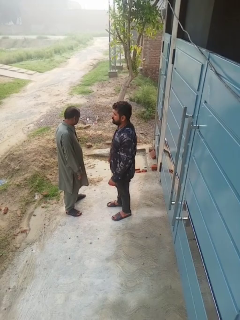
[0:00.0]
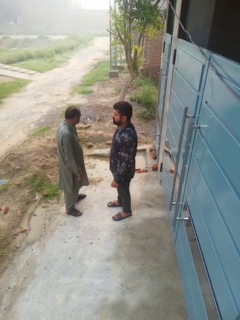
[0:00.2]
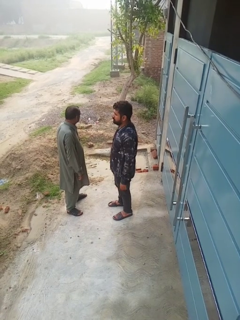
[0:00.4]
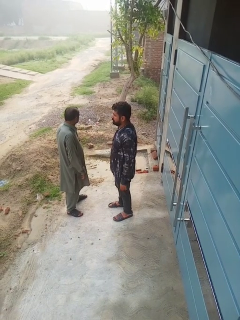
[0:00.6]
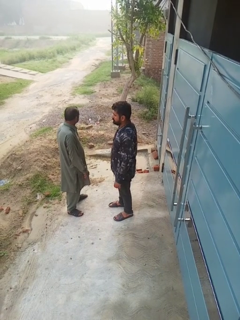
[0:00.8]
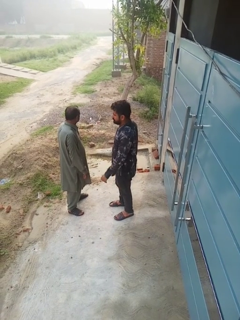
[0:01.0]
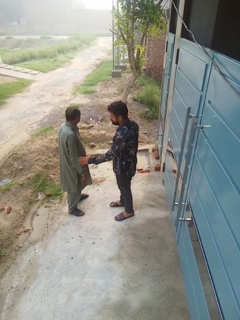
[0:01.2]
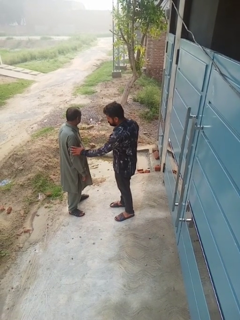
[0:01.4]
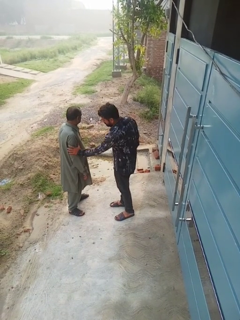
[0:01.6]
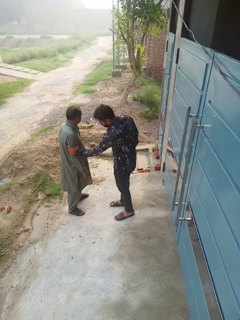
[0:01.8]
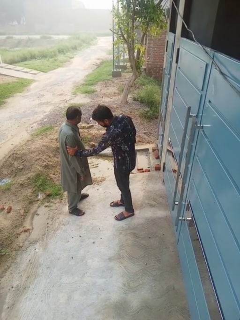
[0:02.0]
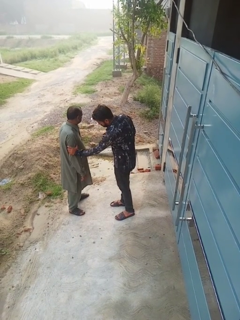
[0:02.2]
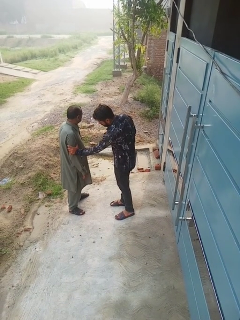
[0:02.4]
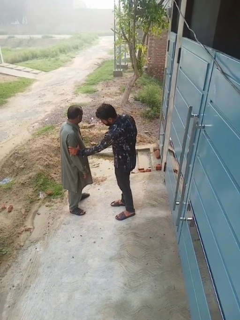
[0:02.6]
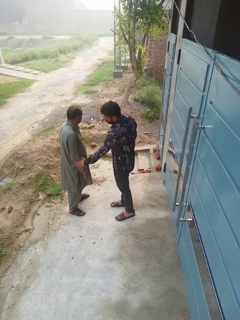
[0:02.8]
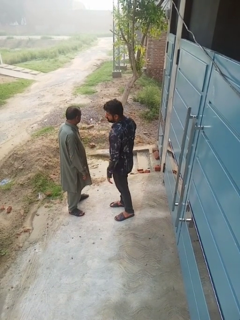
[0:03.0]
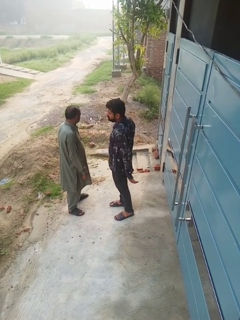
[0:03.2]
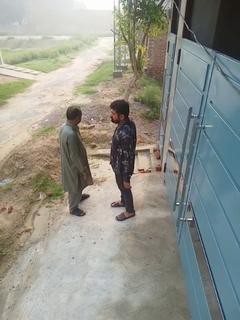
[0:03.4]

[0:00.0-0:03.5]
person grabs person by bicep

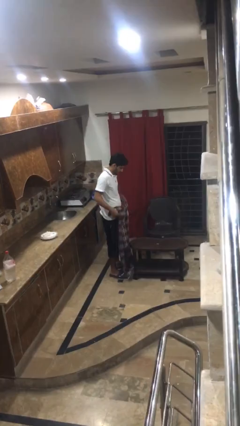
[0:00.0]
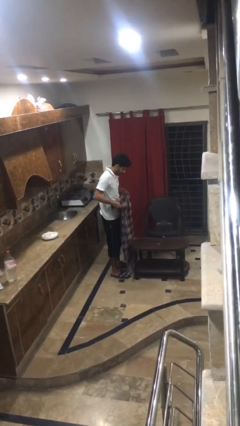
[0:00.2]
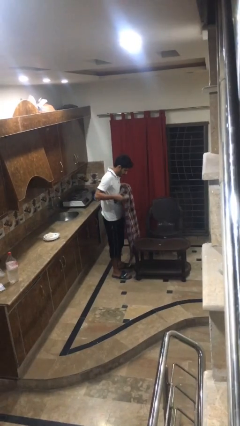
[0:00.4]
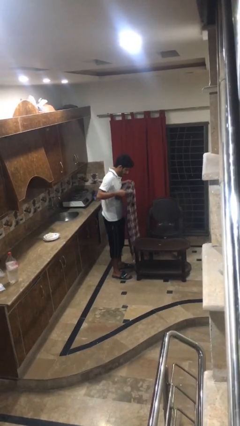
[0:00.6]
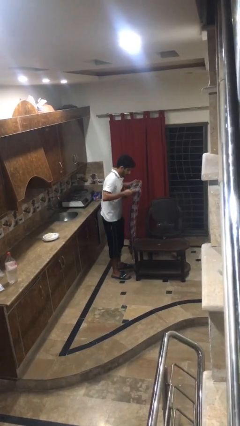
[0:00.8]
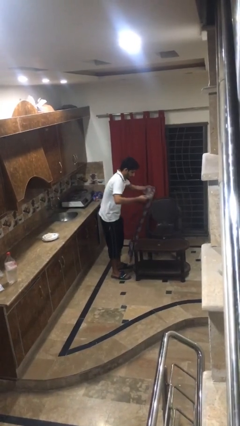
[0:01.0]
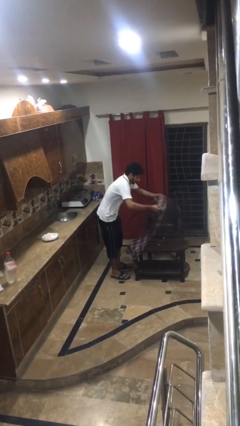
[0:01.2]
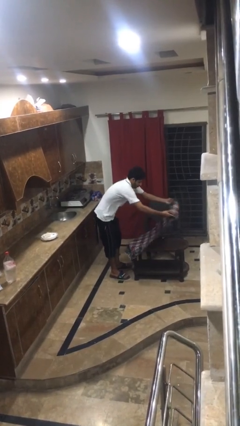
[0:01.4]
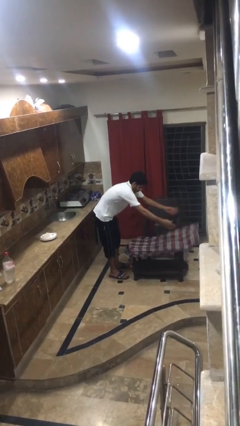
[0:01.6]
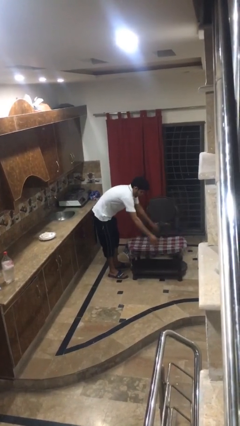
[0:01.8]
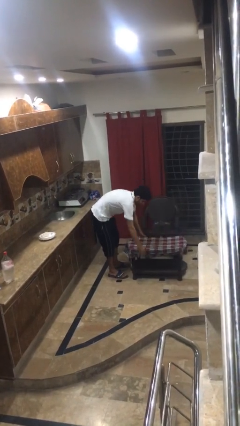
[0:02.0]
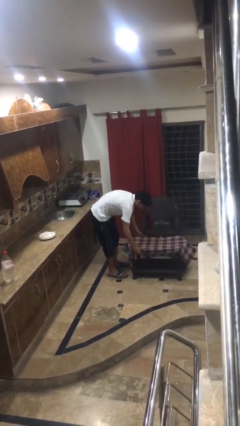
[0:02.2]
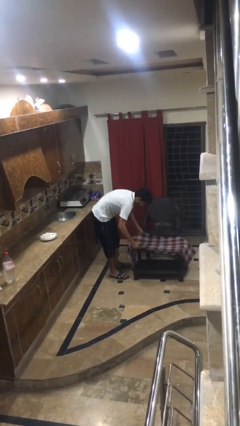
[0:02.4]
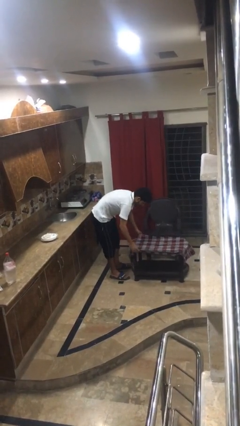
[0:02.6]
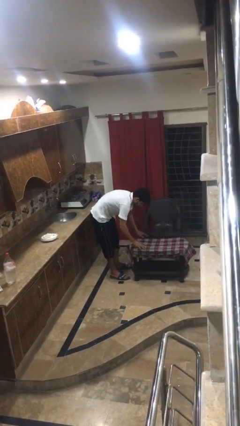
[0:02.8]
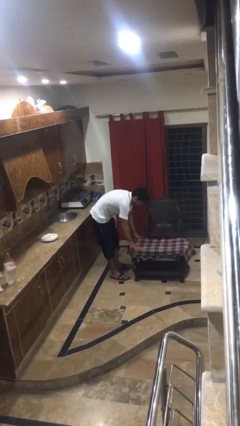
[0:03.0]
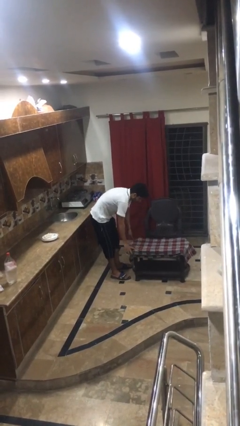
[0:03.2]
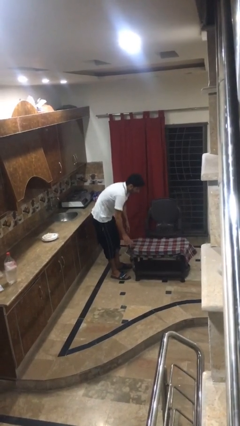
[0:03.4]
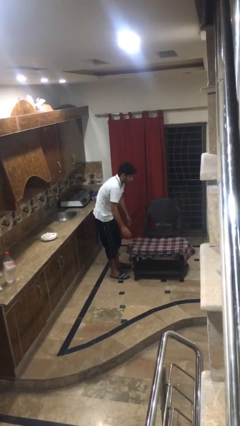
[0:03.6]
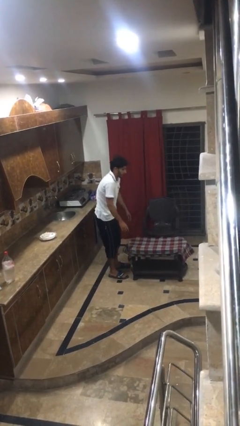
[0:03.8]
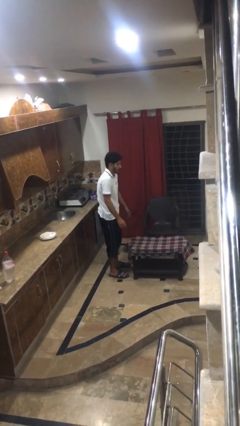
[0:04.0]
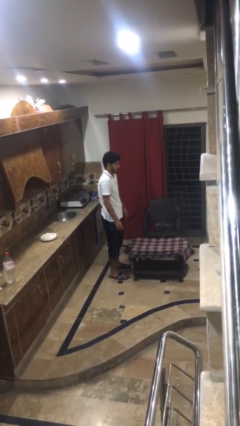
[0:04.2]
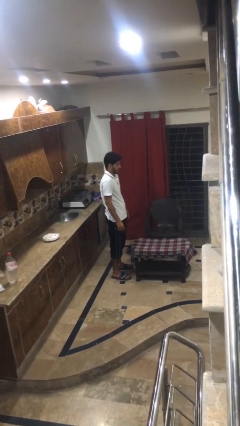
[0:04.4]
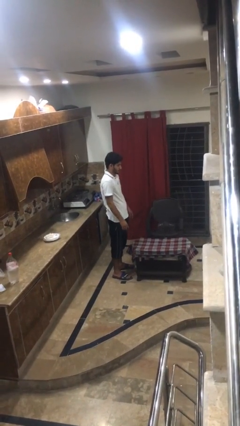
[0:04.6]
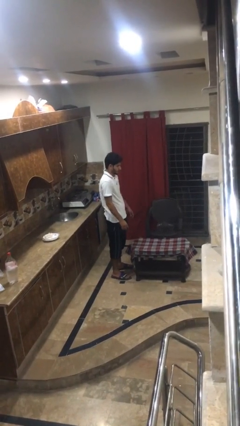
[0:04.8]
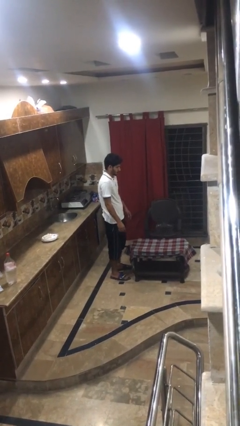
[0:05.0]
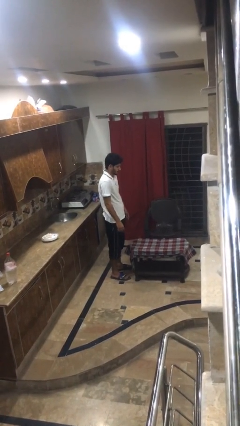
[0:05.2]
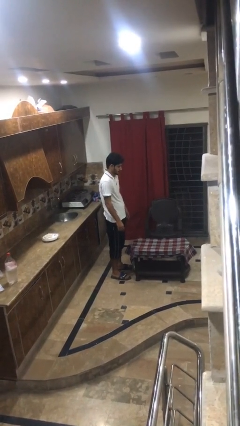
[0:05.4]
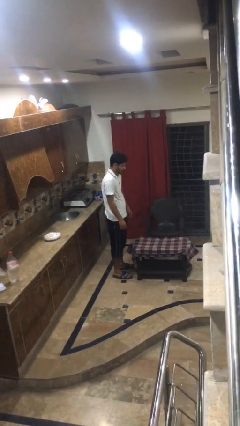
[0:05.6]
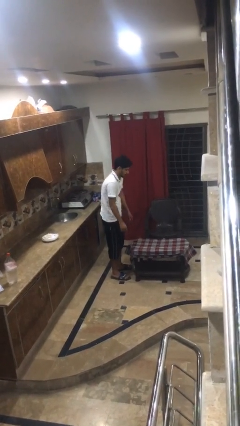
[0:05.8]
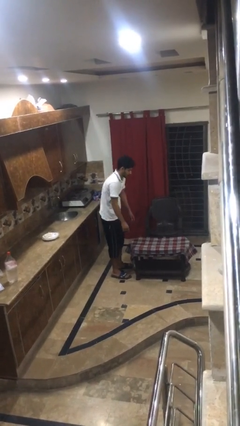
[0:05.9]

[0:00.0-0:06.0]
person spreads tablecloth

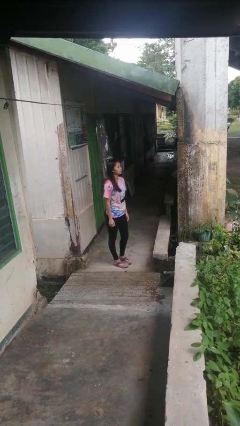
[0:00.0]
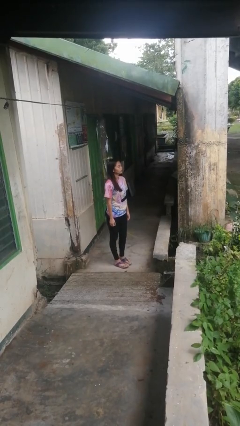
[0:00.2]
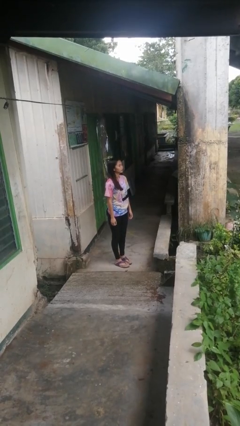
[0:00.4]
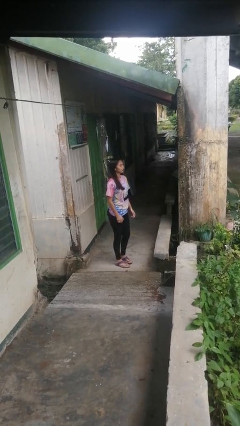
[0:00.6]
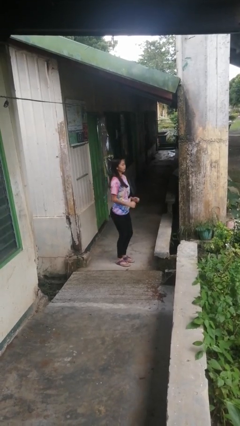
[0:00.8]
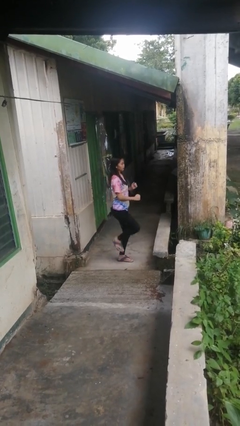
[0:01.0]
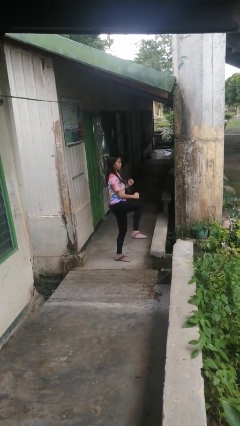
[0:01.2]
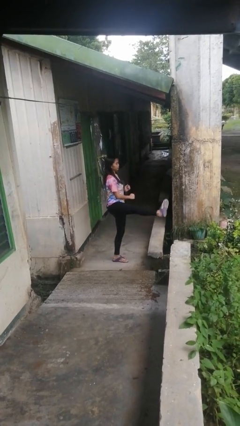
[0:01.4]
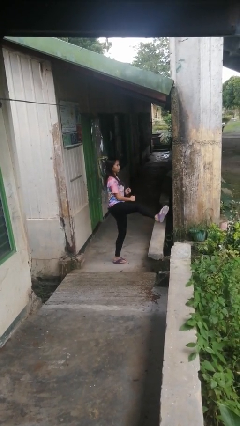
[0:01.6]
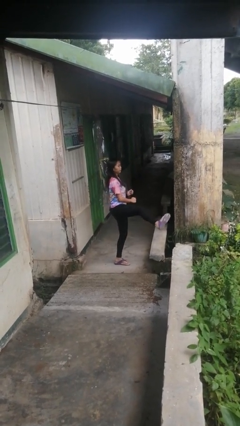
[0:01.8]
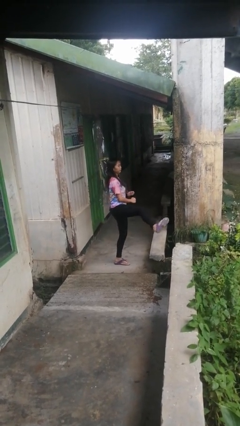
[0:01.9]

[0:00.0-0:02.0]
person karate kicks

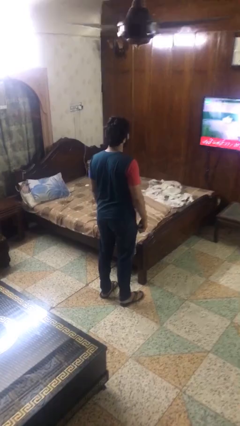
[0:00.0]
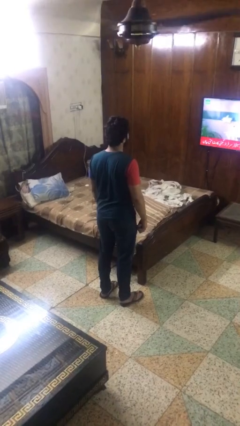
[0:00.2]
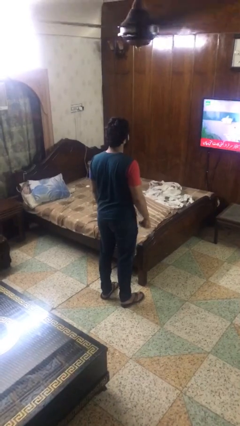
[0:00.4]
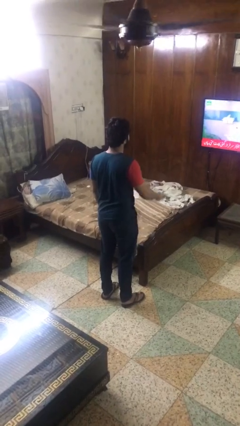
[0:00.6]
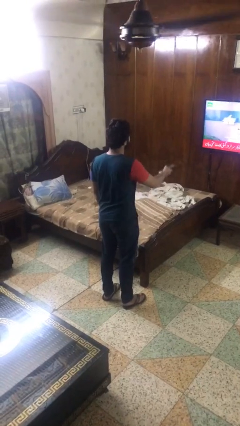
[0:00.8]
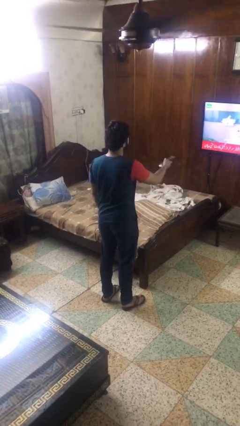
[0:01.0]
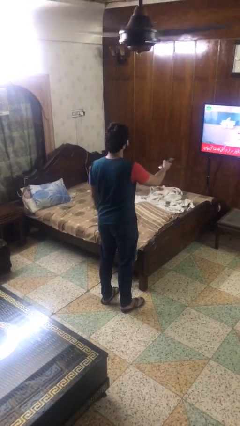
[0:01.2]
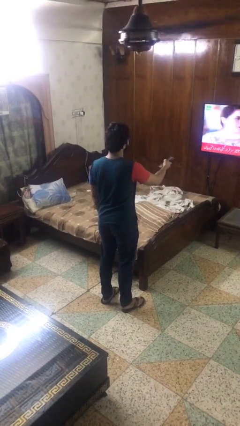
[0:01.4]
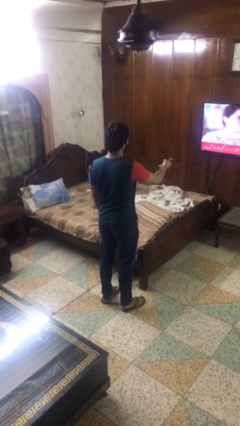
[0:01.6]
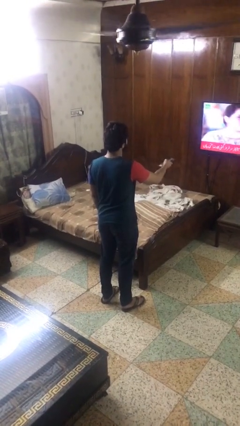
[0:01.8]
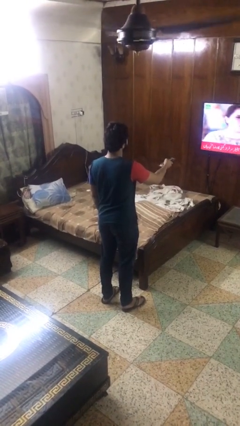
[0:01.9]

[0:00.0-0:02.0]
person uses television remote

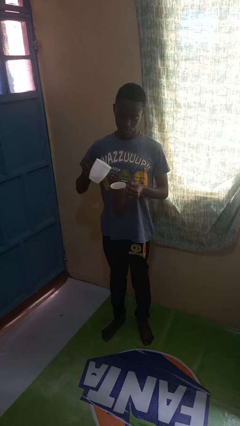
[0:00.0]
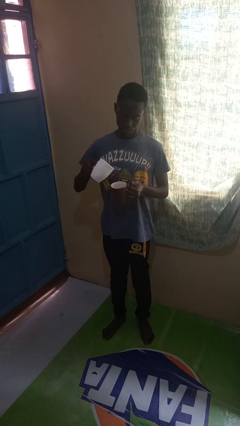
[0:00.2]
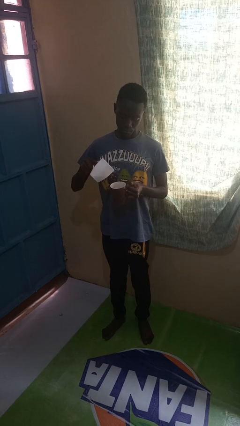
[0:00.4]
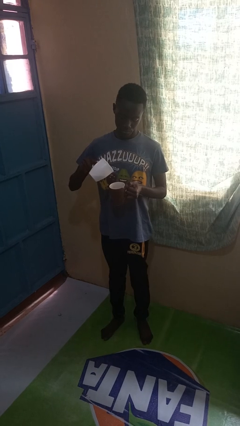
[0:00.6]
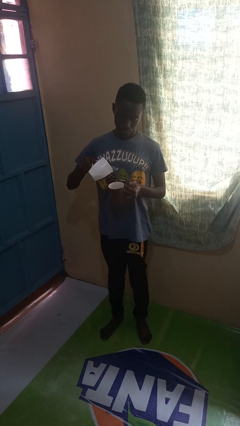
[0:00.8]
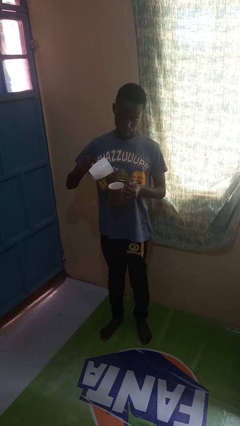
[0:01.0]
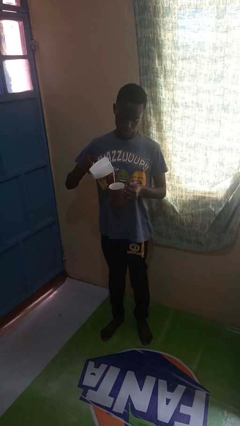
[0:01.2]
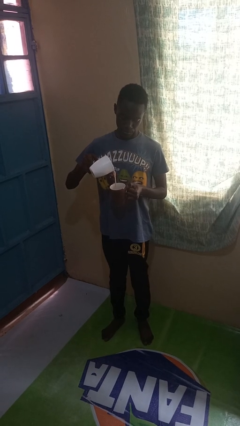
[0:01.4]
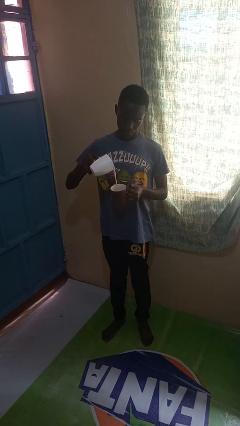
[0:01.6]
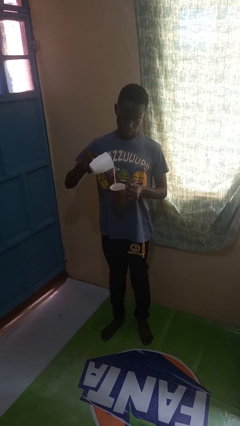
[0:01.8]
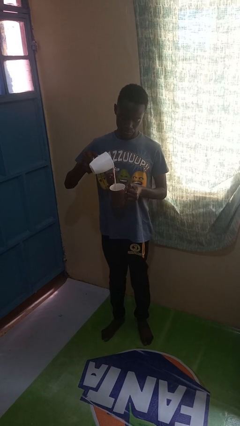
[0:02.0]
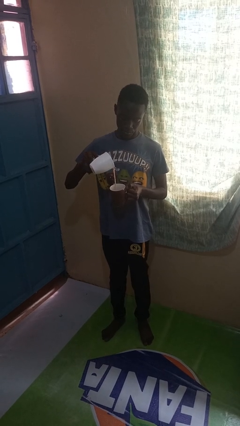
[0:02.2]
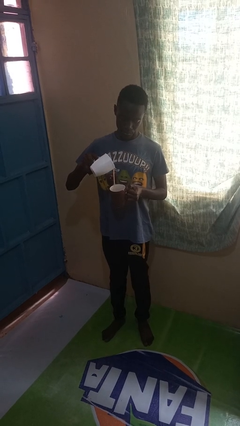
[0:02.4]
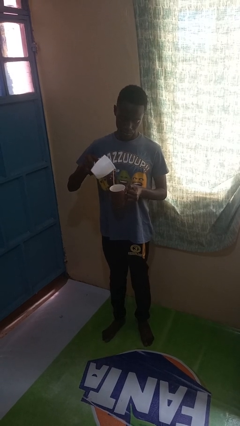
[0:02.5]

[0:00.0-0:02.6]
person pours coffee into mug

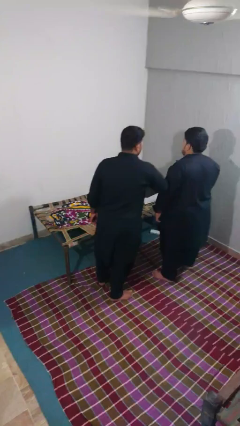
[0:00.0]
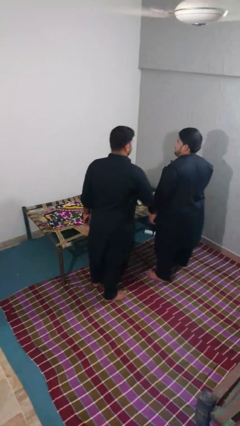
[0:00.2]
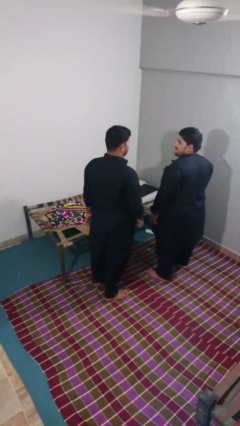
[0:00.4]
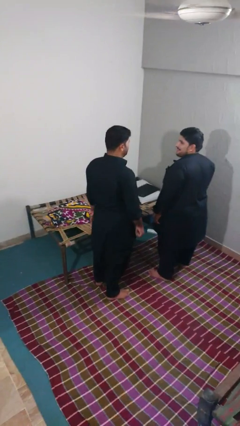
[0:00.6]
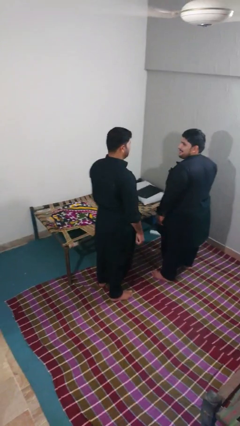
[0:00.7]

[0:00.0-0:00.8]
person nudges person with elbow

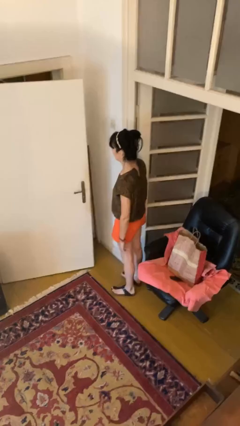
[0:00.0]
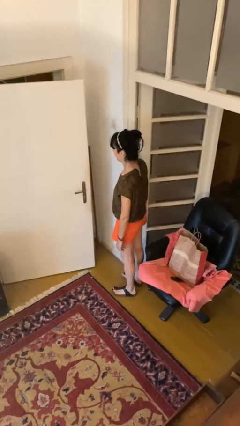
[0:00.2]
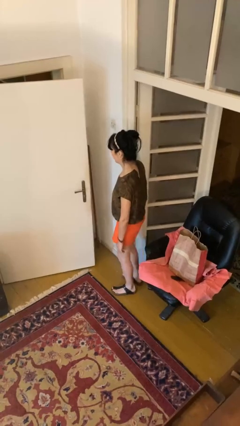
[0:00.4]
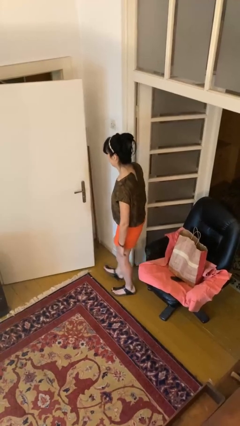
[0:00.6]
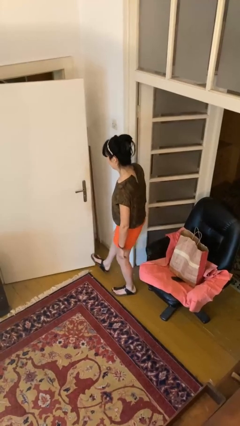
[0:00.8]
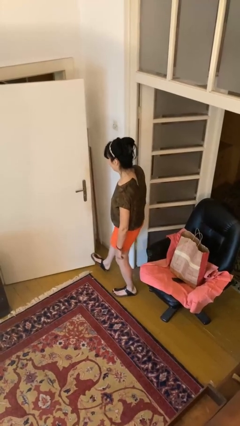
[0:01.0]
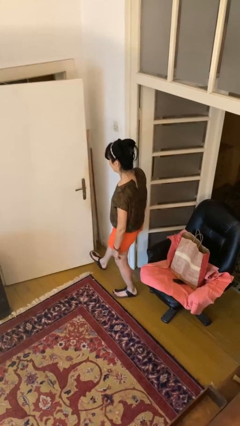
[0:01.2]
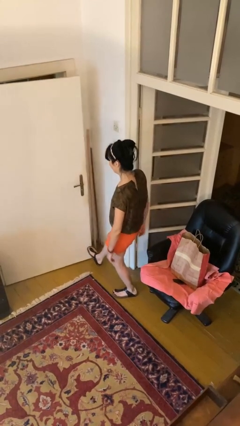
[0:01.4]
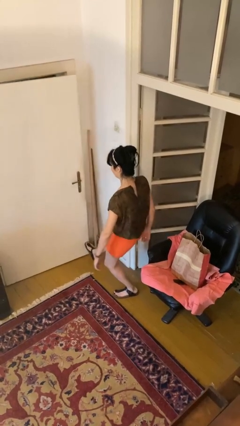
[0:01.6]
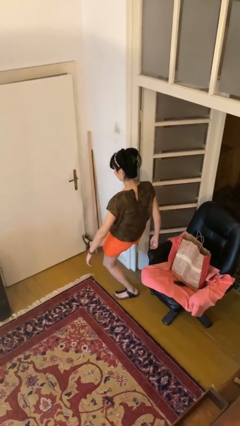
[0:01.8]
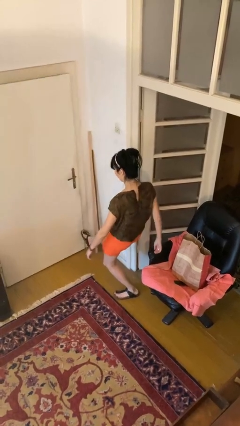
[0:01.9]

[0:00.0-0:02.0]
person closes door with foot
